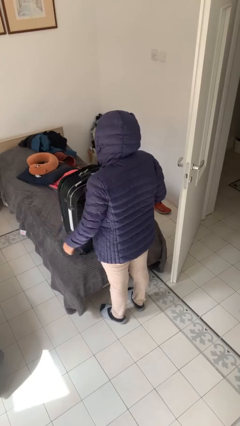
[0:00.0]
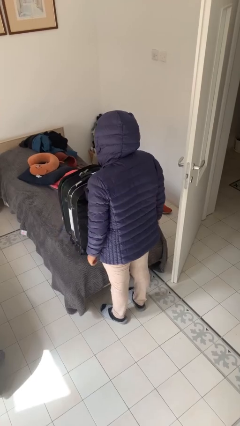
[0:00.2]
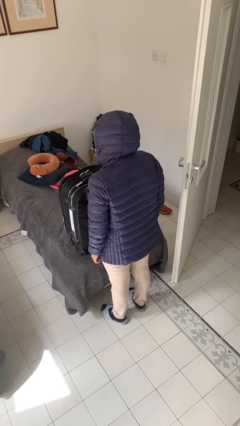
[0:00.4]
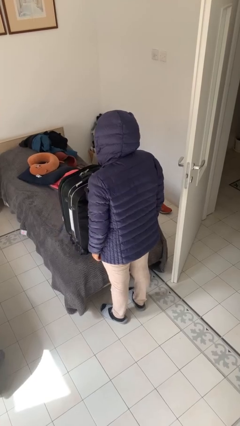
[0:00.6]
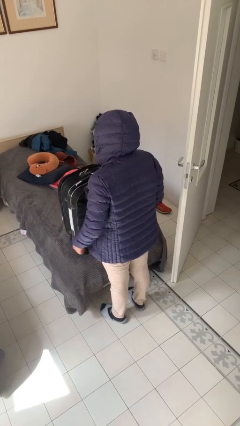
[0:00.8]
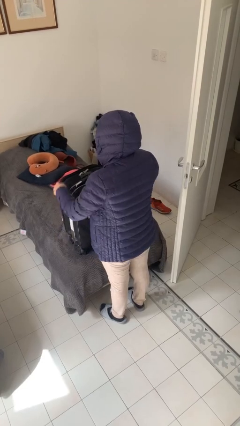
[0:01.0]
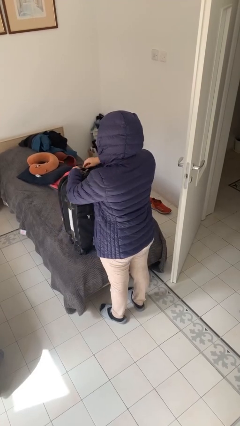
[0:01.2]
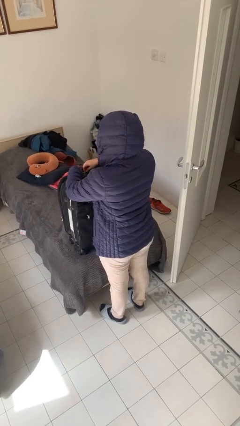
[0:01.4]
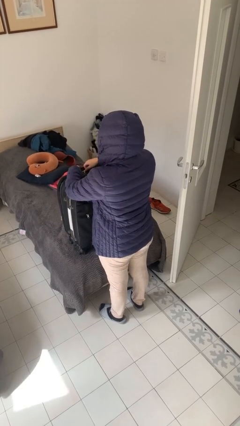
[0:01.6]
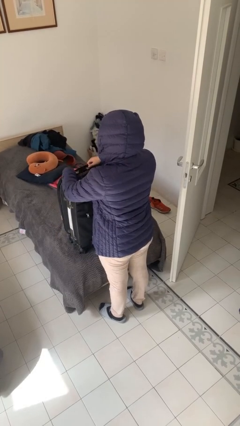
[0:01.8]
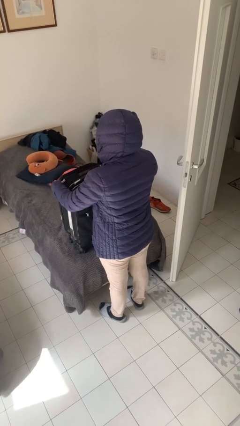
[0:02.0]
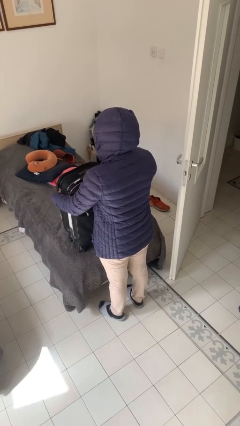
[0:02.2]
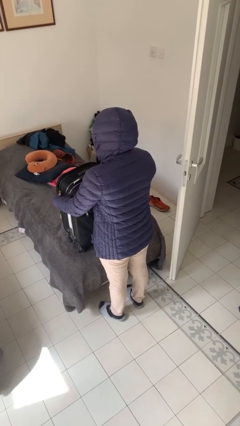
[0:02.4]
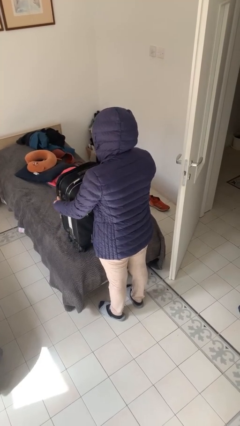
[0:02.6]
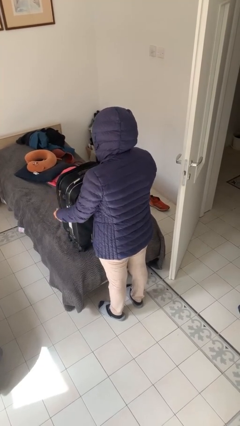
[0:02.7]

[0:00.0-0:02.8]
person opens suitcase

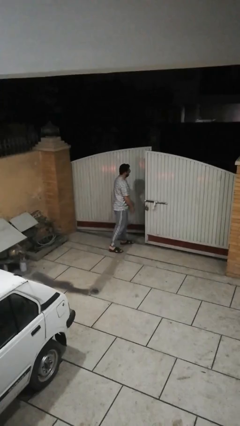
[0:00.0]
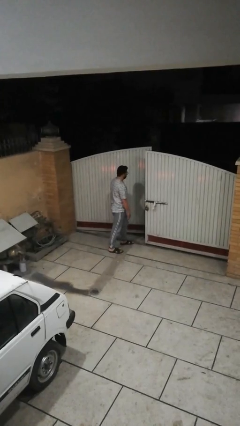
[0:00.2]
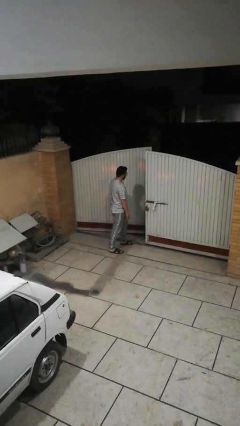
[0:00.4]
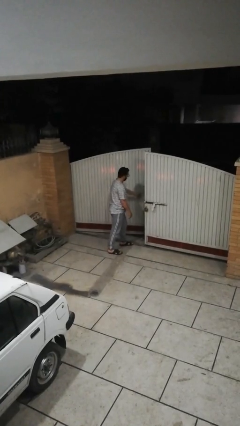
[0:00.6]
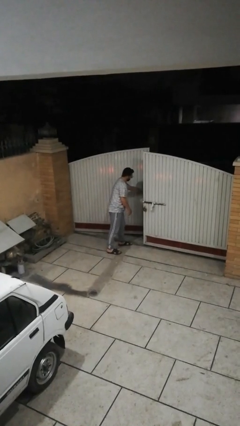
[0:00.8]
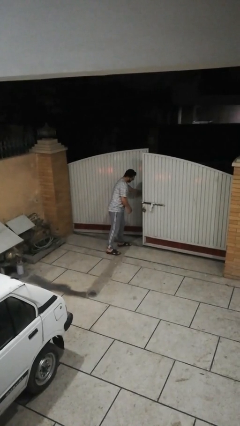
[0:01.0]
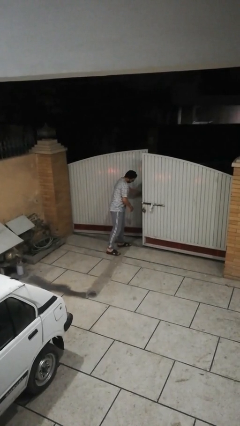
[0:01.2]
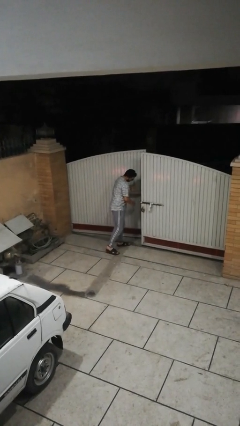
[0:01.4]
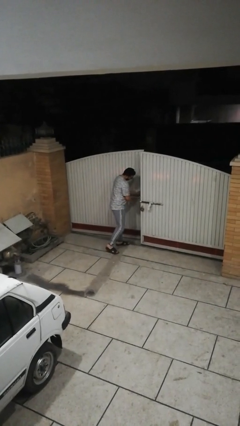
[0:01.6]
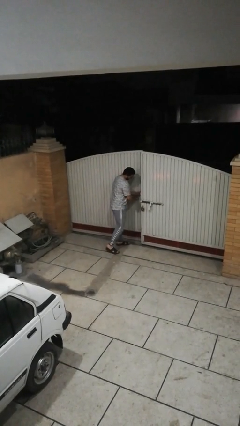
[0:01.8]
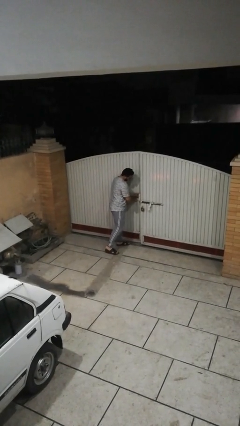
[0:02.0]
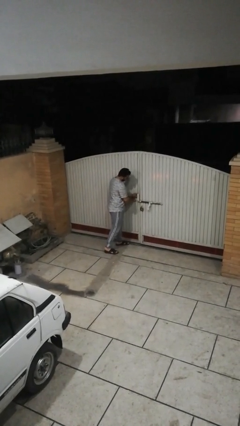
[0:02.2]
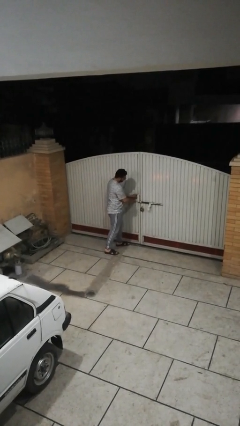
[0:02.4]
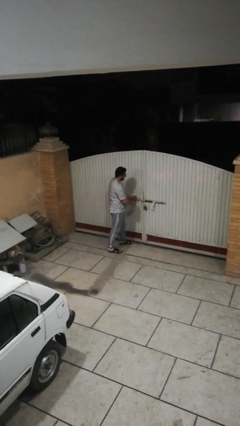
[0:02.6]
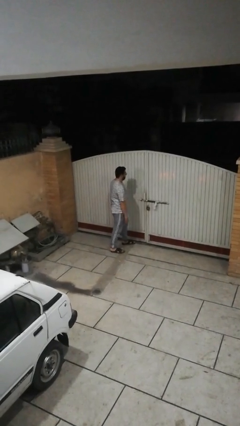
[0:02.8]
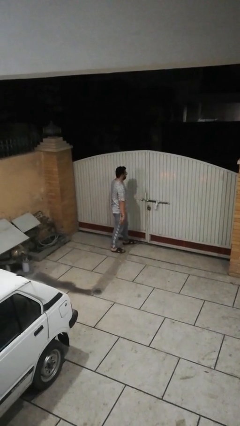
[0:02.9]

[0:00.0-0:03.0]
person closes facility door

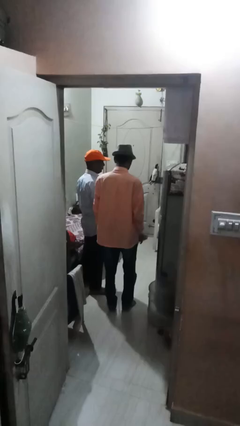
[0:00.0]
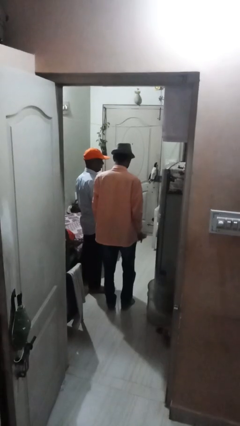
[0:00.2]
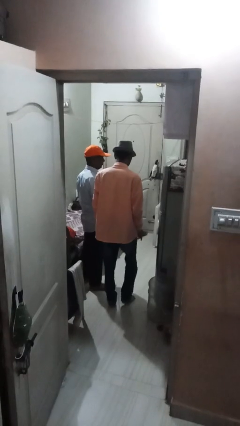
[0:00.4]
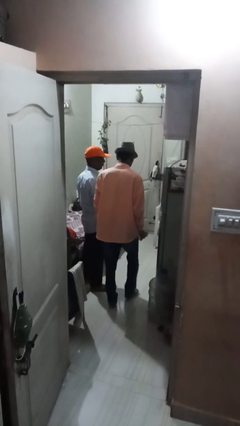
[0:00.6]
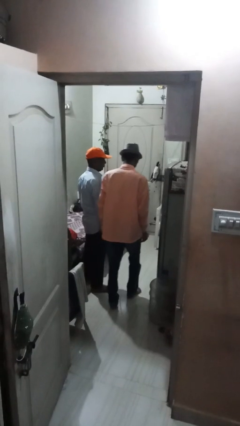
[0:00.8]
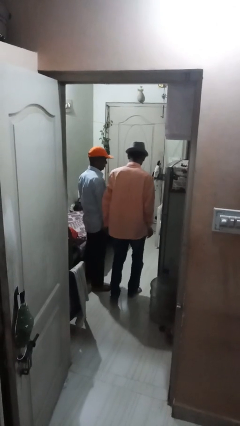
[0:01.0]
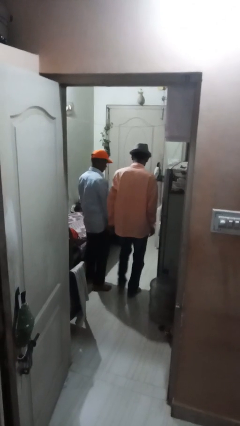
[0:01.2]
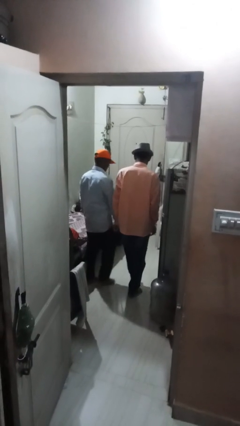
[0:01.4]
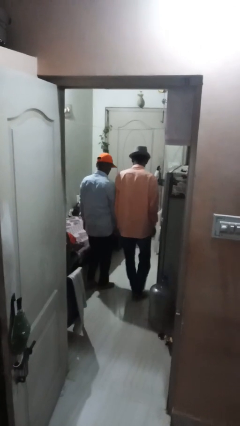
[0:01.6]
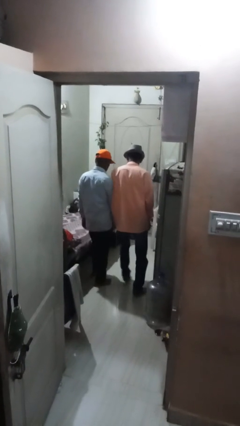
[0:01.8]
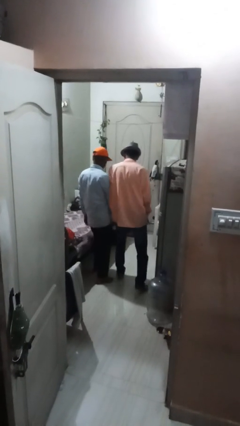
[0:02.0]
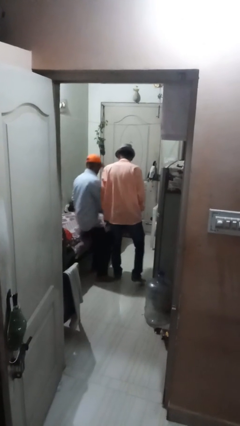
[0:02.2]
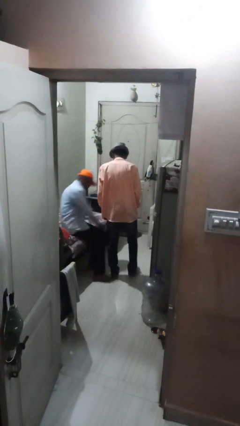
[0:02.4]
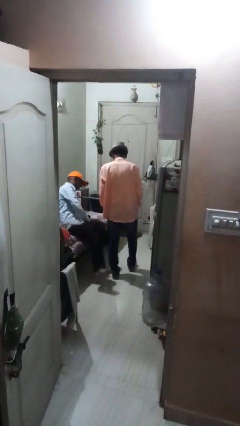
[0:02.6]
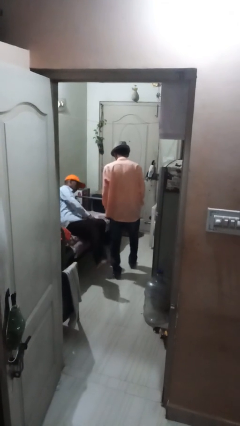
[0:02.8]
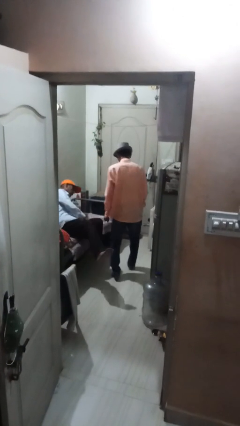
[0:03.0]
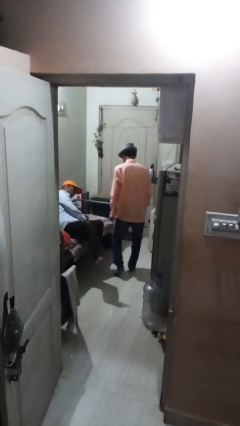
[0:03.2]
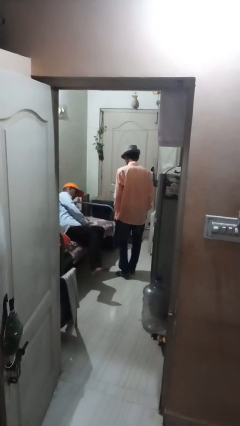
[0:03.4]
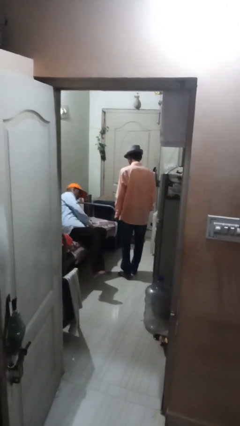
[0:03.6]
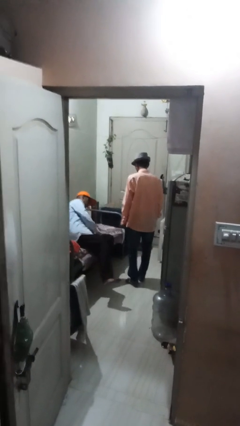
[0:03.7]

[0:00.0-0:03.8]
person bumps into person

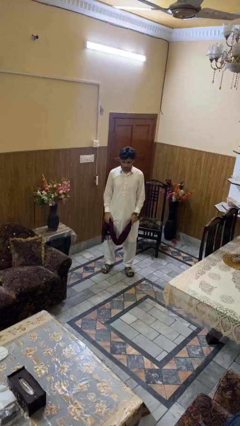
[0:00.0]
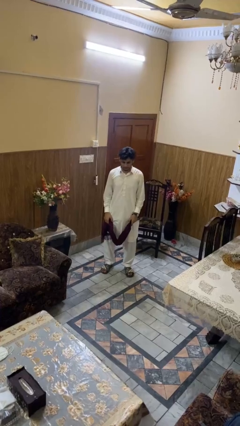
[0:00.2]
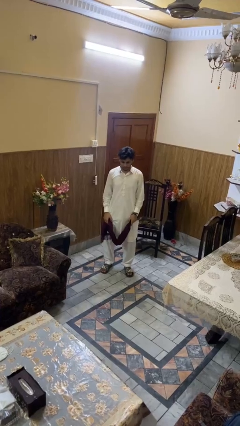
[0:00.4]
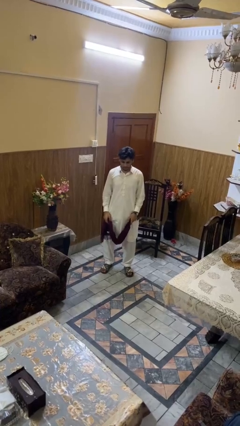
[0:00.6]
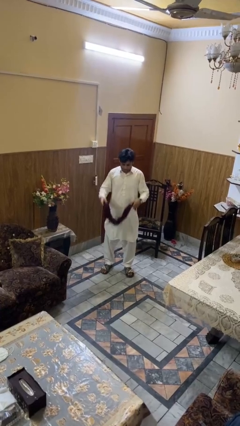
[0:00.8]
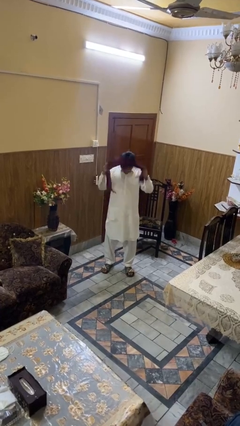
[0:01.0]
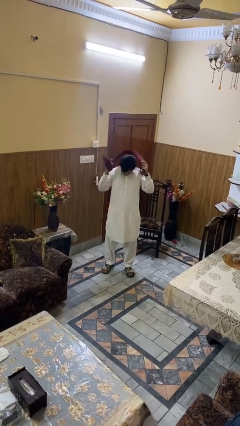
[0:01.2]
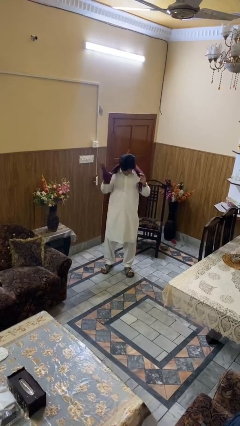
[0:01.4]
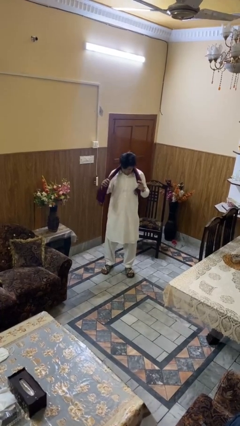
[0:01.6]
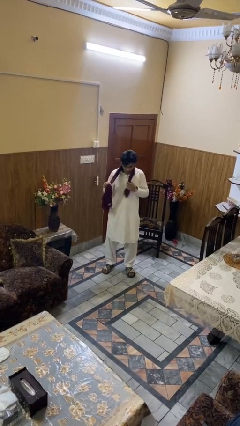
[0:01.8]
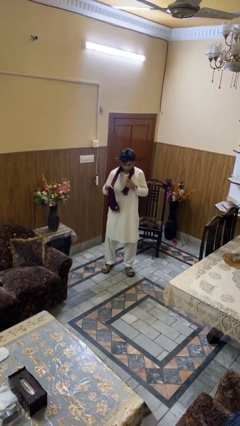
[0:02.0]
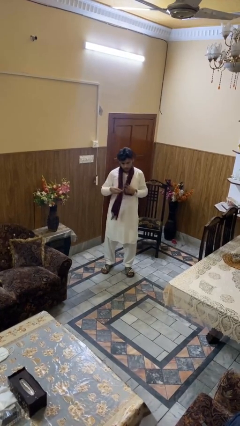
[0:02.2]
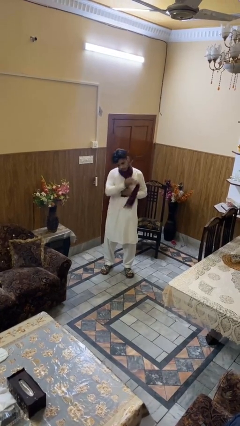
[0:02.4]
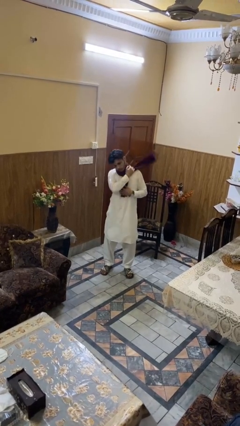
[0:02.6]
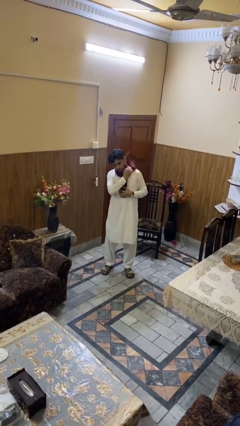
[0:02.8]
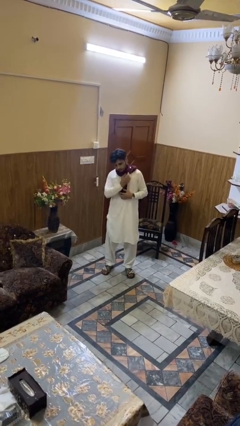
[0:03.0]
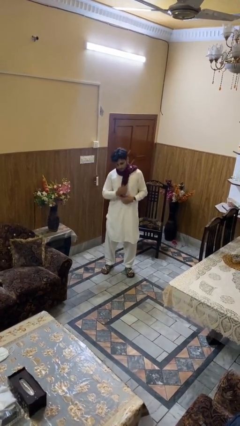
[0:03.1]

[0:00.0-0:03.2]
person puts on scarf

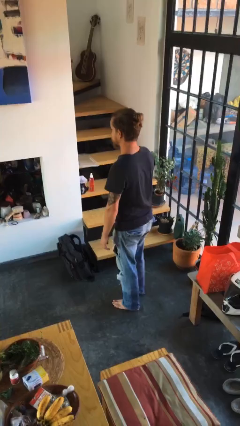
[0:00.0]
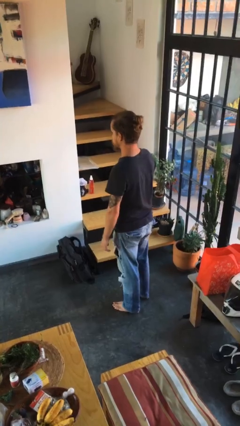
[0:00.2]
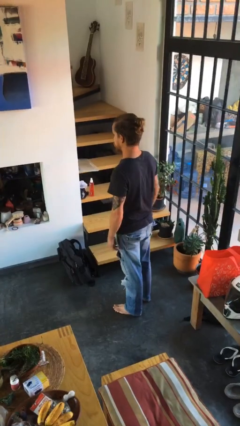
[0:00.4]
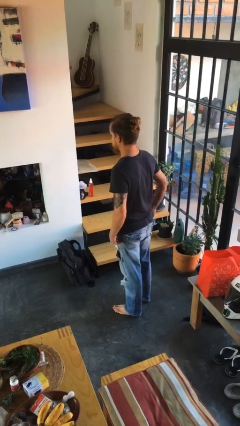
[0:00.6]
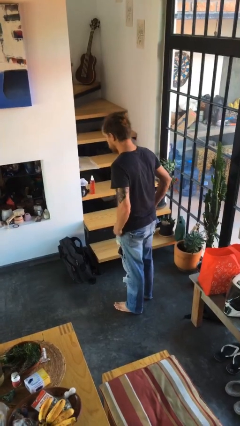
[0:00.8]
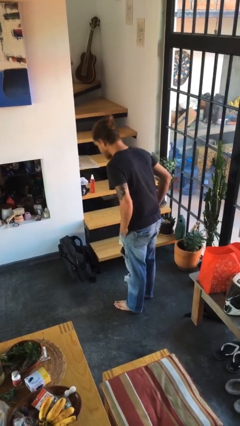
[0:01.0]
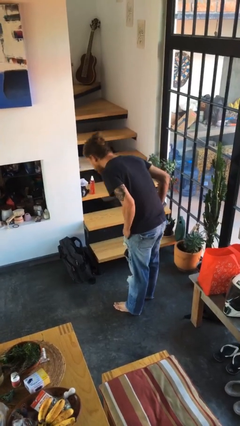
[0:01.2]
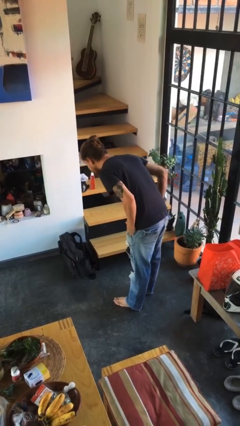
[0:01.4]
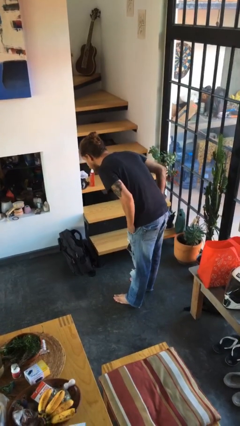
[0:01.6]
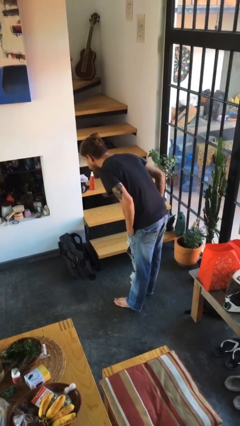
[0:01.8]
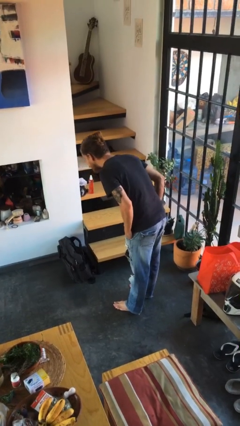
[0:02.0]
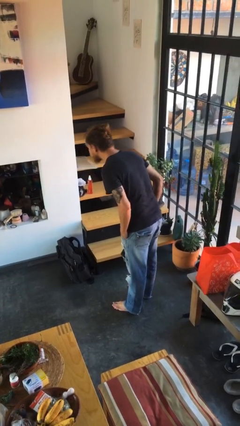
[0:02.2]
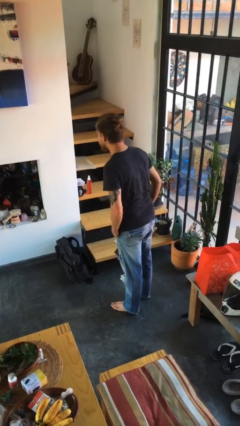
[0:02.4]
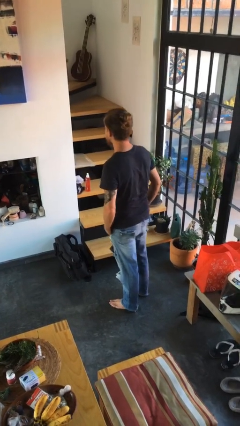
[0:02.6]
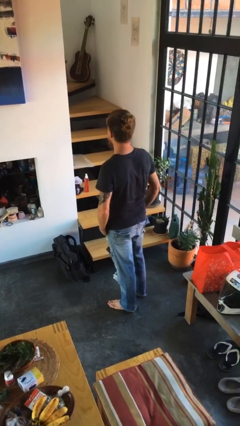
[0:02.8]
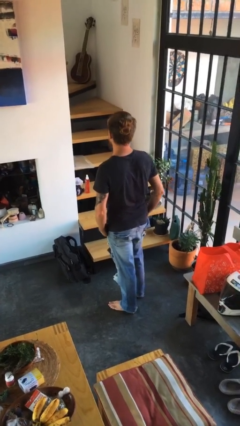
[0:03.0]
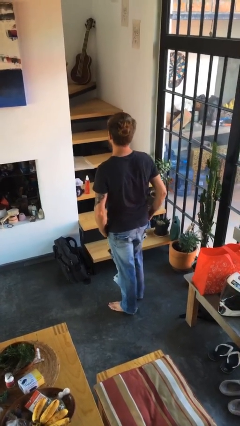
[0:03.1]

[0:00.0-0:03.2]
person bows

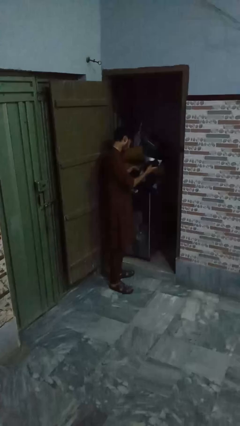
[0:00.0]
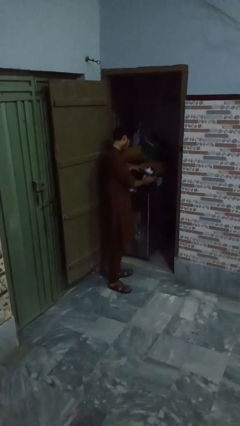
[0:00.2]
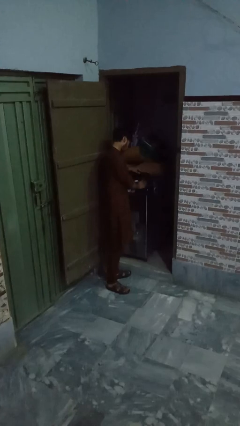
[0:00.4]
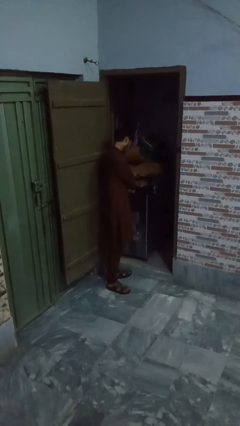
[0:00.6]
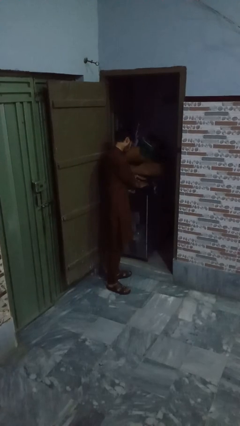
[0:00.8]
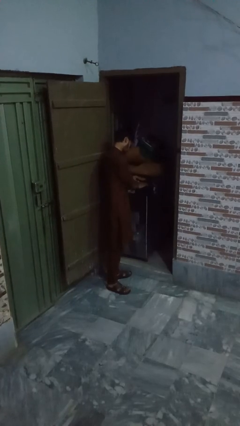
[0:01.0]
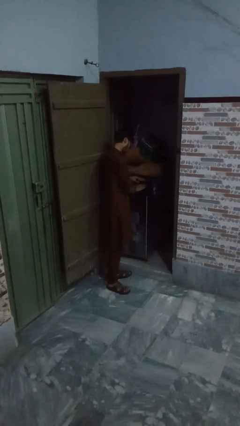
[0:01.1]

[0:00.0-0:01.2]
person loads dryer
